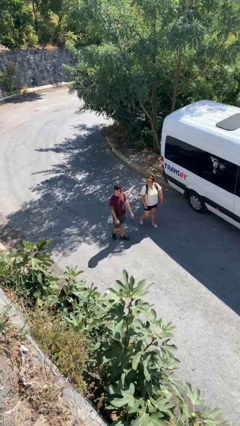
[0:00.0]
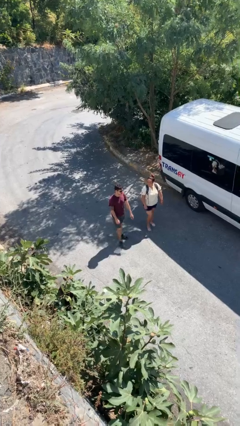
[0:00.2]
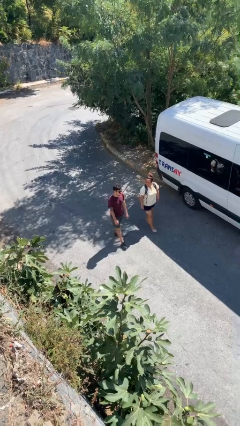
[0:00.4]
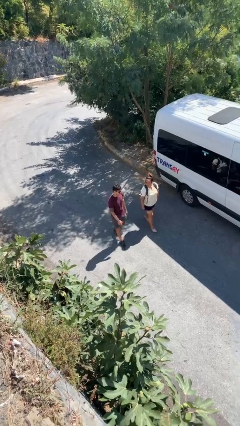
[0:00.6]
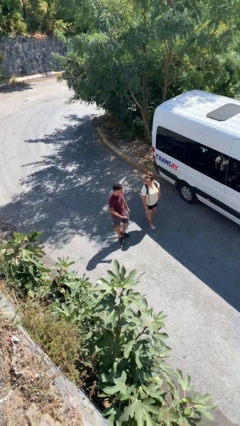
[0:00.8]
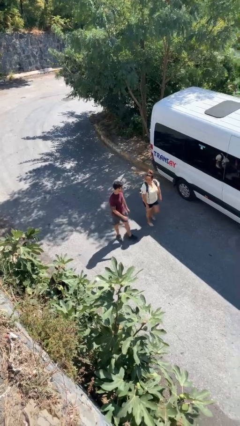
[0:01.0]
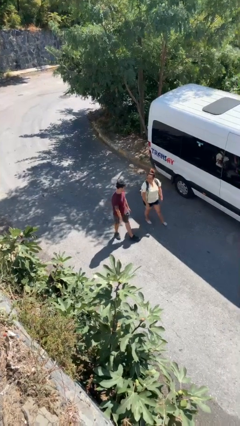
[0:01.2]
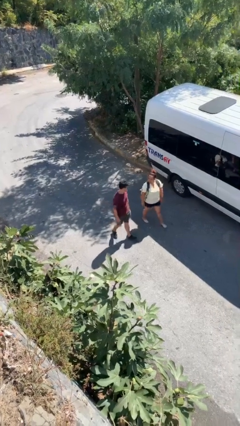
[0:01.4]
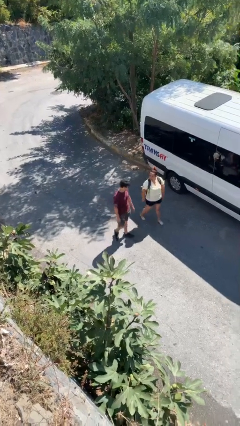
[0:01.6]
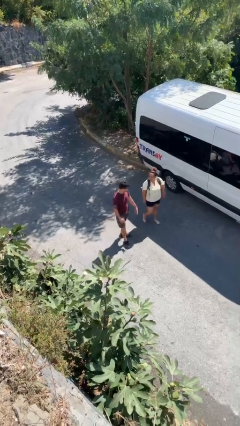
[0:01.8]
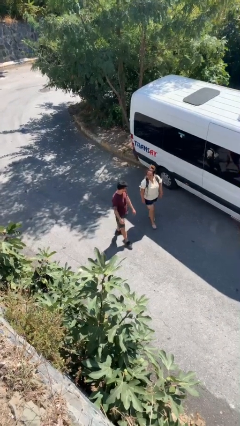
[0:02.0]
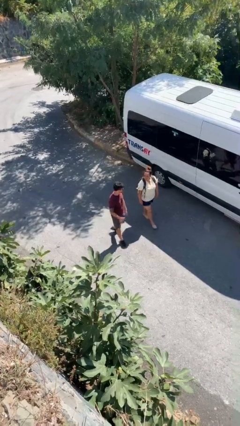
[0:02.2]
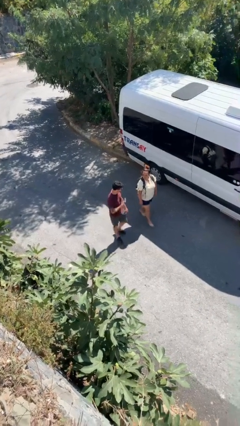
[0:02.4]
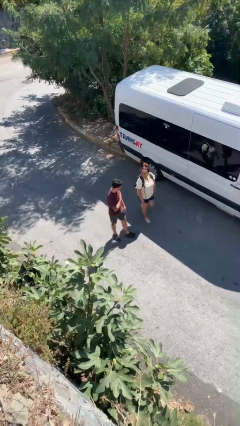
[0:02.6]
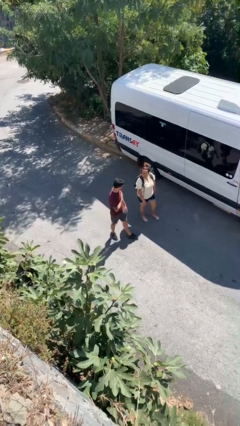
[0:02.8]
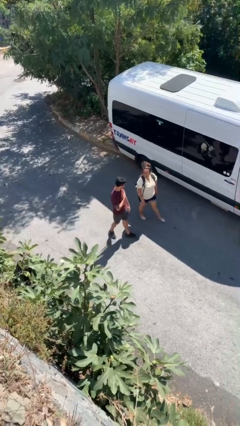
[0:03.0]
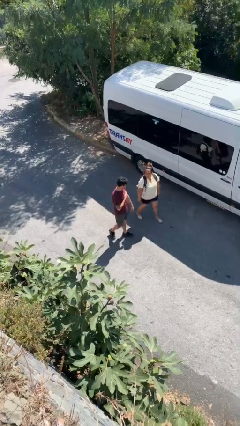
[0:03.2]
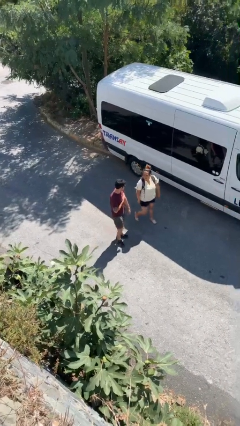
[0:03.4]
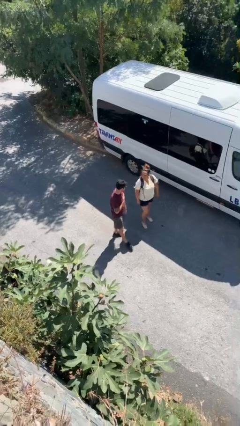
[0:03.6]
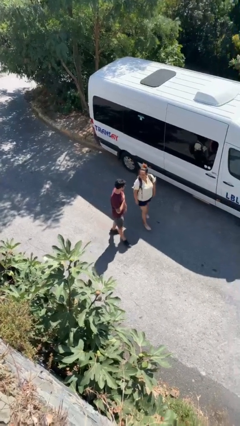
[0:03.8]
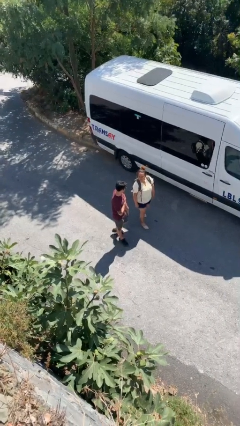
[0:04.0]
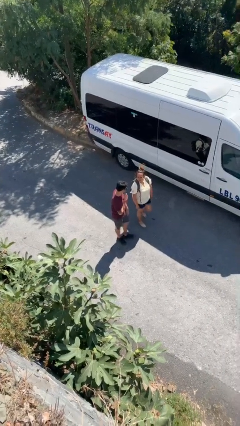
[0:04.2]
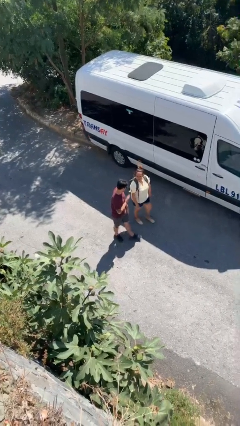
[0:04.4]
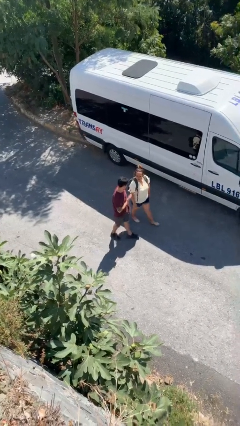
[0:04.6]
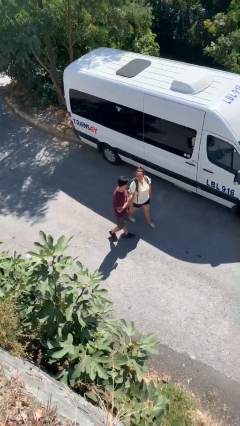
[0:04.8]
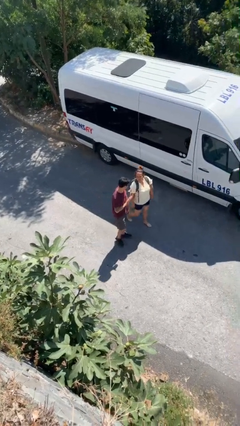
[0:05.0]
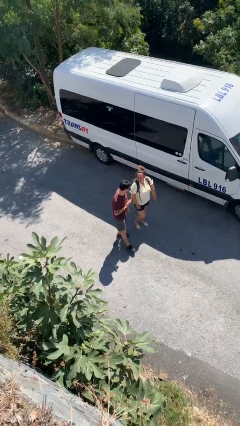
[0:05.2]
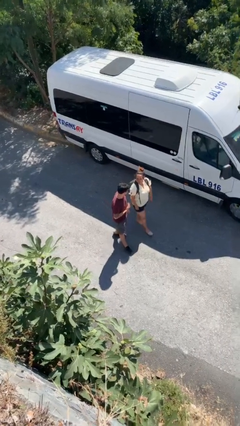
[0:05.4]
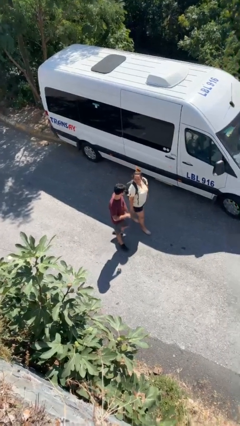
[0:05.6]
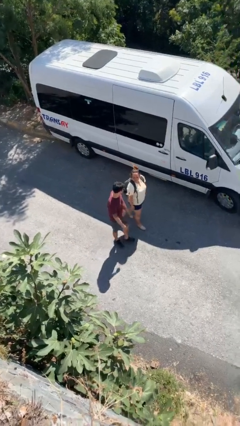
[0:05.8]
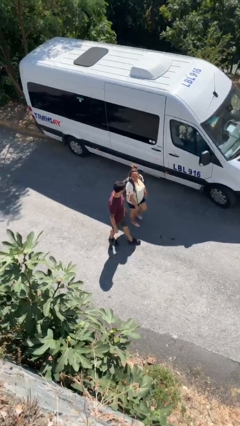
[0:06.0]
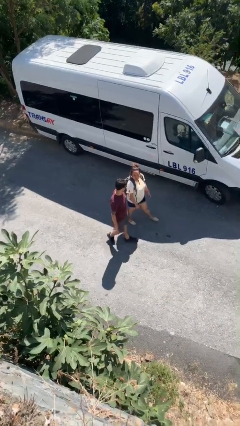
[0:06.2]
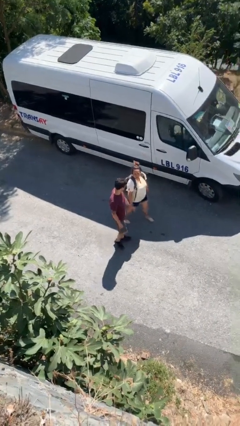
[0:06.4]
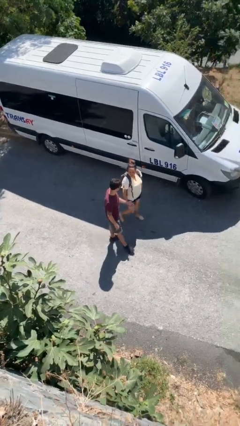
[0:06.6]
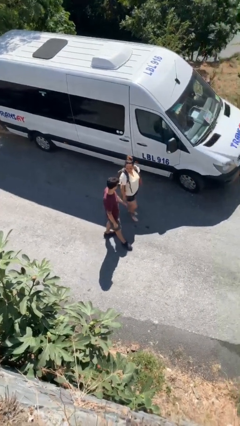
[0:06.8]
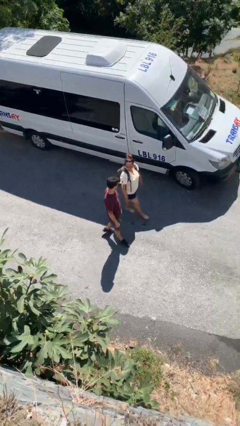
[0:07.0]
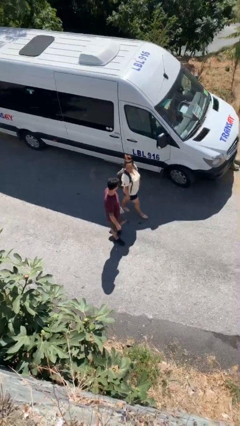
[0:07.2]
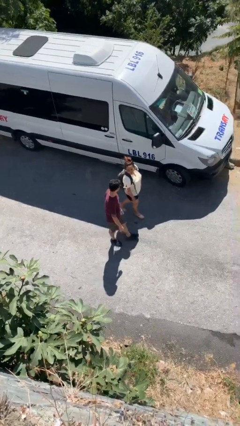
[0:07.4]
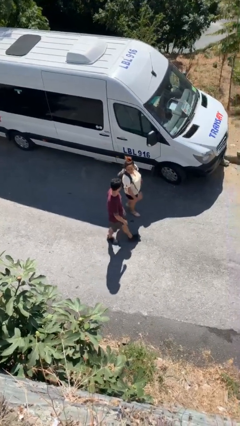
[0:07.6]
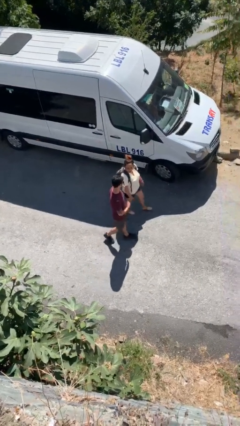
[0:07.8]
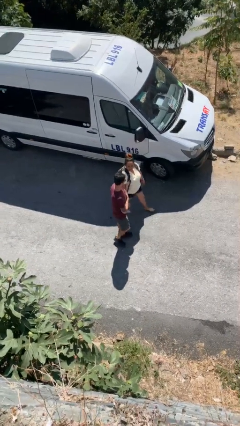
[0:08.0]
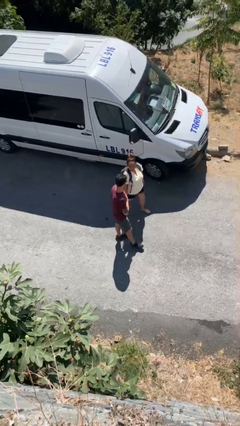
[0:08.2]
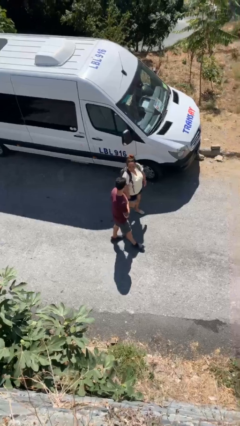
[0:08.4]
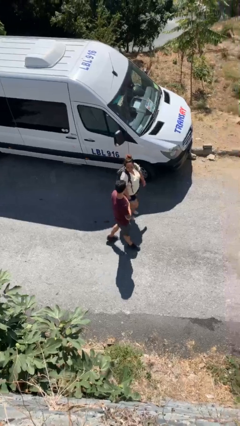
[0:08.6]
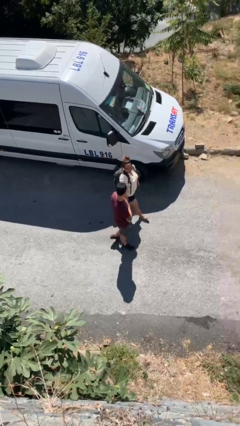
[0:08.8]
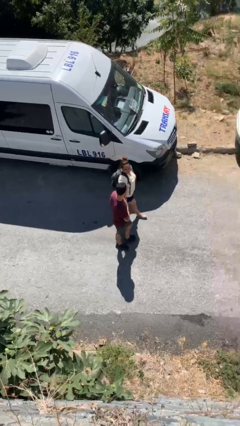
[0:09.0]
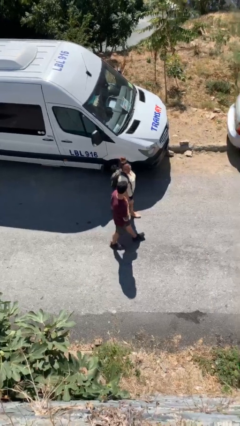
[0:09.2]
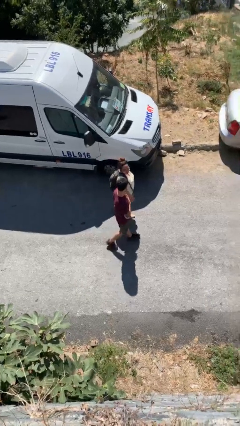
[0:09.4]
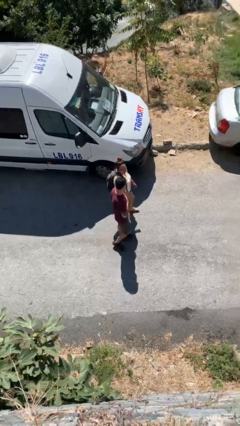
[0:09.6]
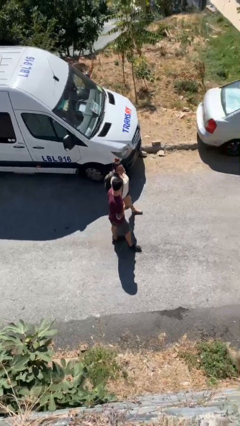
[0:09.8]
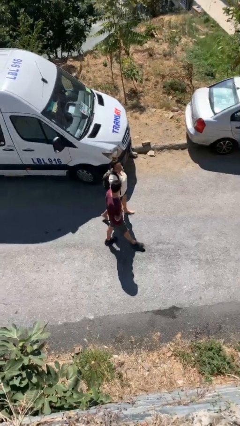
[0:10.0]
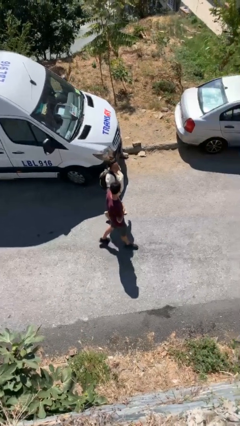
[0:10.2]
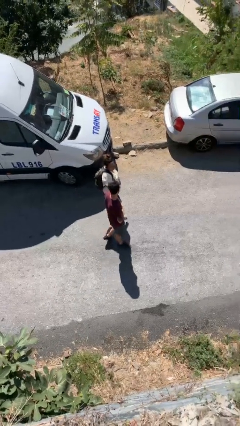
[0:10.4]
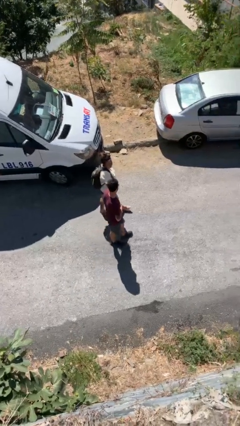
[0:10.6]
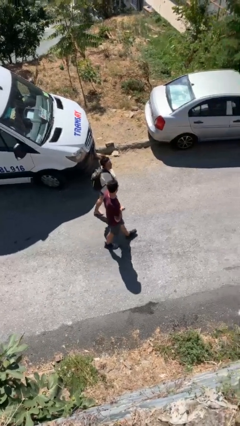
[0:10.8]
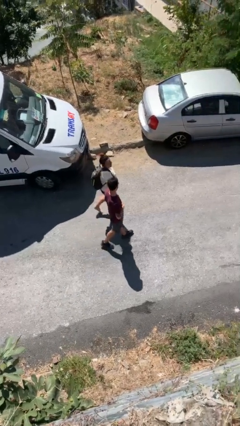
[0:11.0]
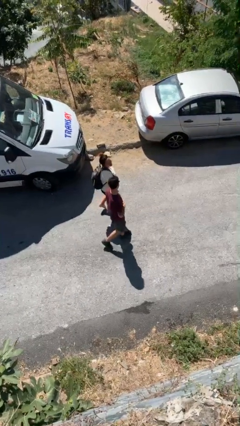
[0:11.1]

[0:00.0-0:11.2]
person talks to person

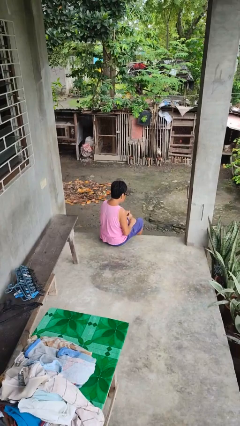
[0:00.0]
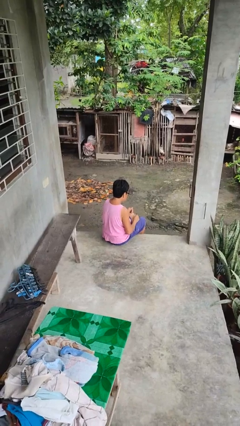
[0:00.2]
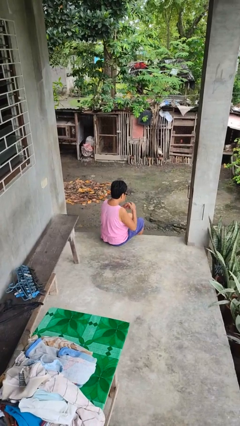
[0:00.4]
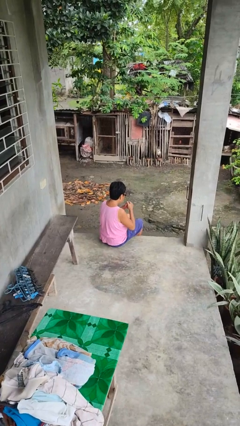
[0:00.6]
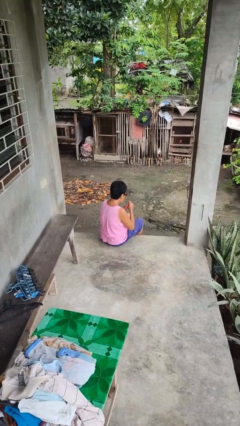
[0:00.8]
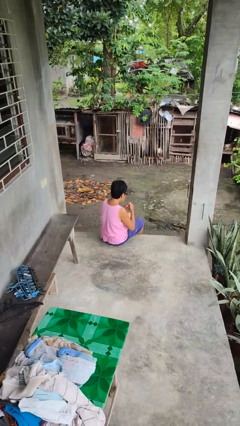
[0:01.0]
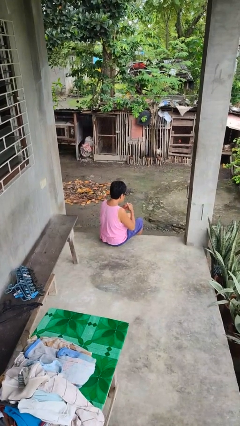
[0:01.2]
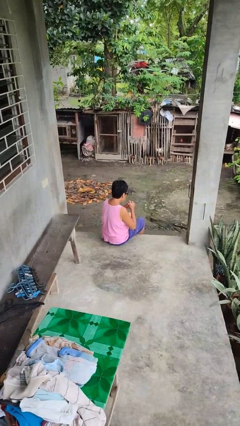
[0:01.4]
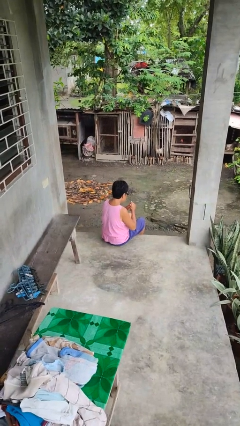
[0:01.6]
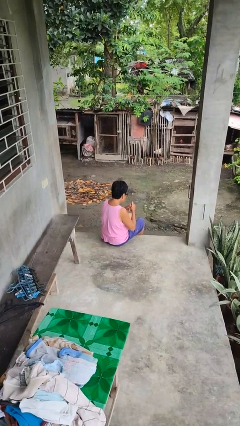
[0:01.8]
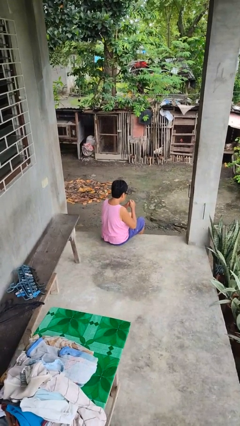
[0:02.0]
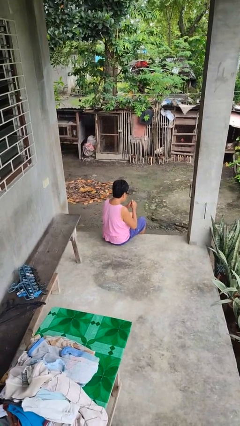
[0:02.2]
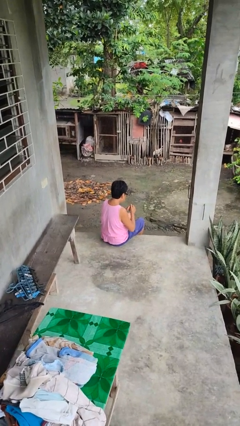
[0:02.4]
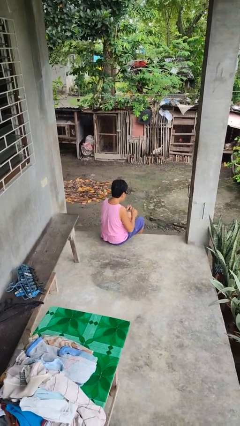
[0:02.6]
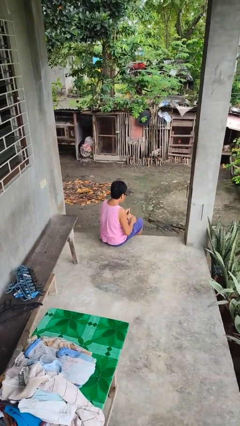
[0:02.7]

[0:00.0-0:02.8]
person cracks knuckles

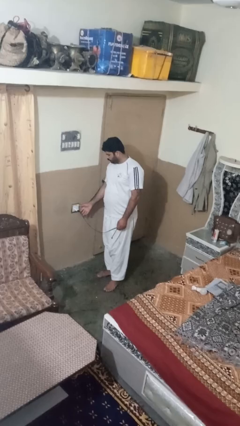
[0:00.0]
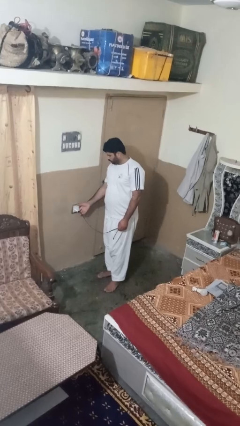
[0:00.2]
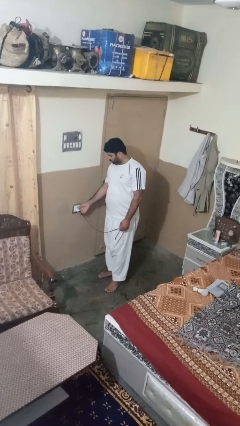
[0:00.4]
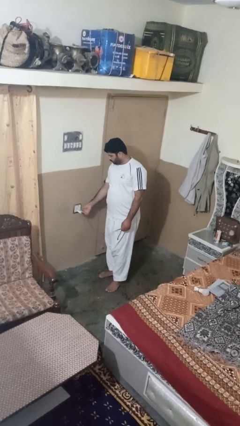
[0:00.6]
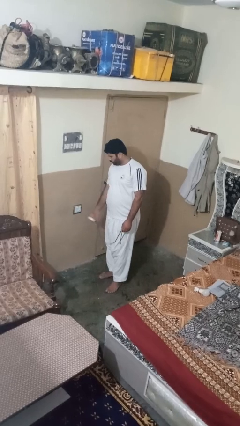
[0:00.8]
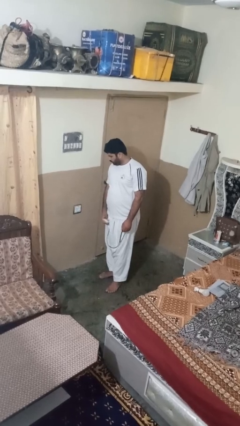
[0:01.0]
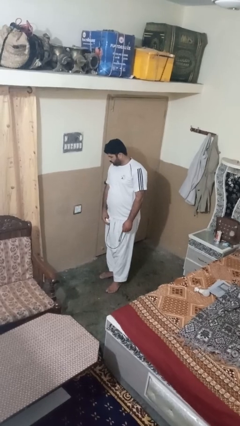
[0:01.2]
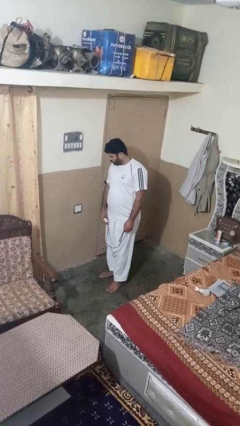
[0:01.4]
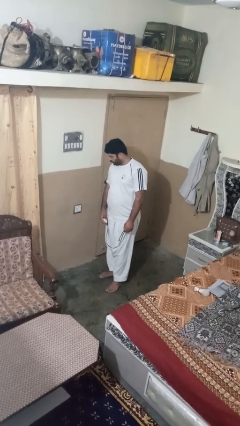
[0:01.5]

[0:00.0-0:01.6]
person unplugs from electrical socket

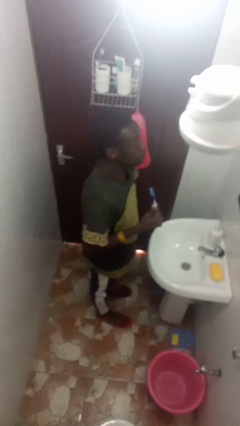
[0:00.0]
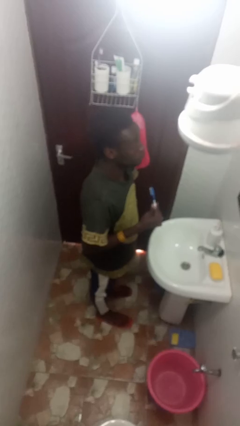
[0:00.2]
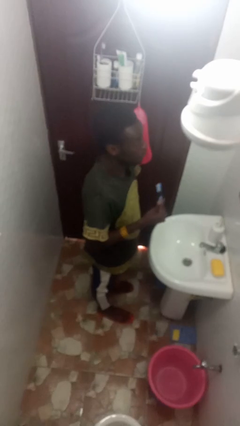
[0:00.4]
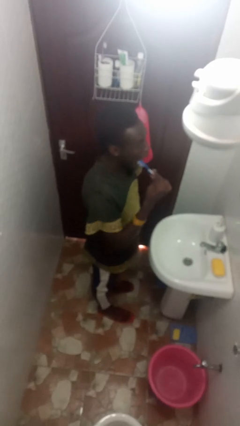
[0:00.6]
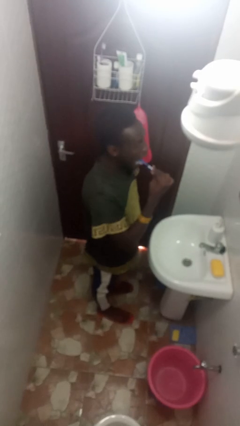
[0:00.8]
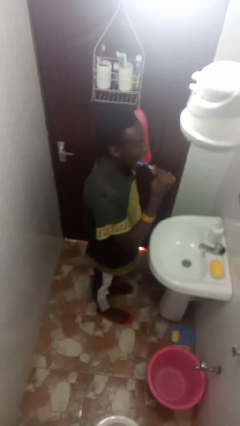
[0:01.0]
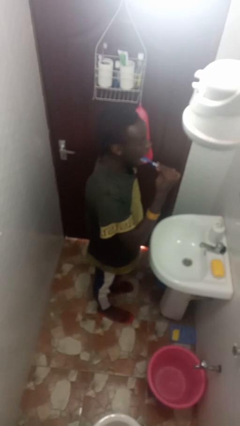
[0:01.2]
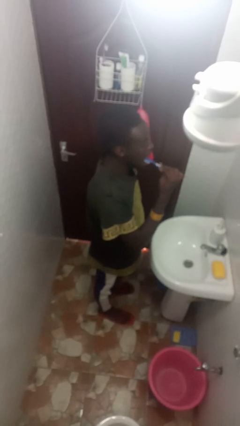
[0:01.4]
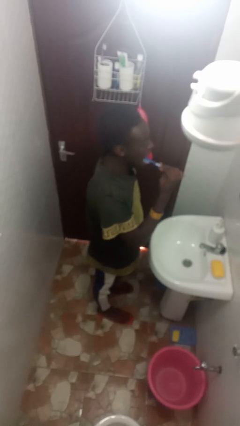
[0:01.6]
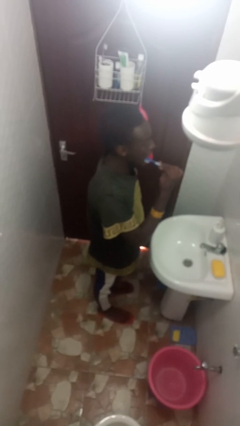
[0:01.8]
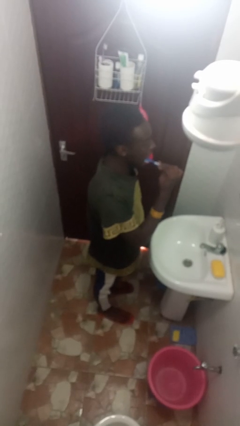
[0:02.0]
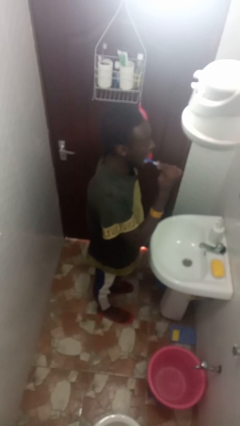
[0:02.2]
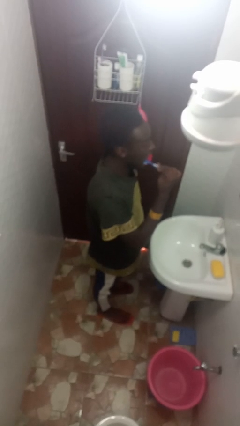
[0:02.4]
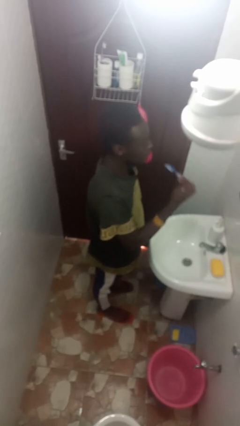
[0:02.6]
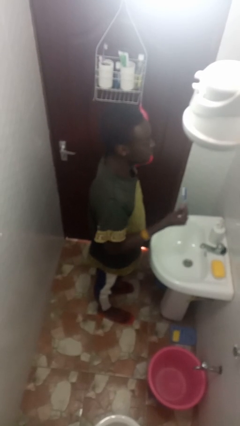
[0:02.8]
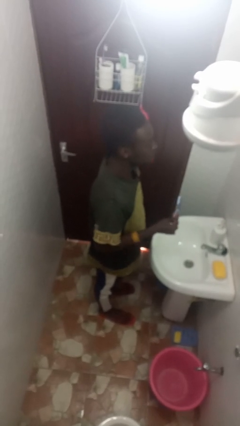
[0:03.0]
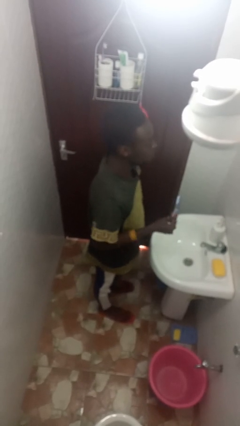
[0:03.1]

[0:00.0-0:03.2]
person brushes teeth
